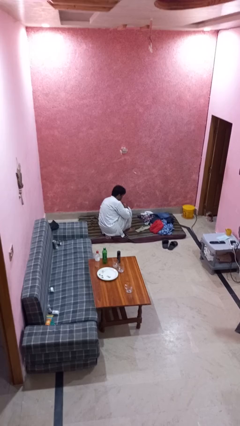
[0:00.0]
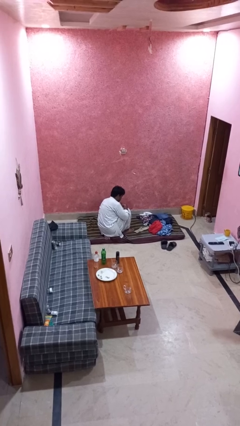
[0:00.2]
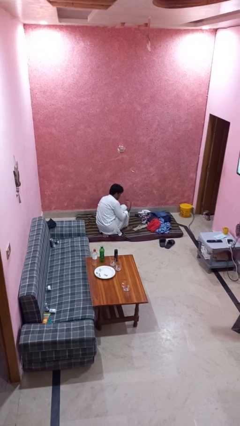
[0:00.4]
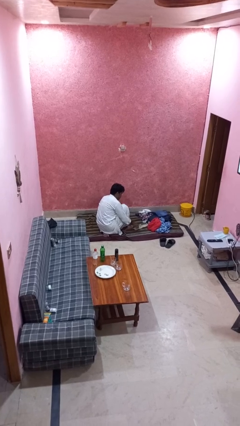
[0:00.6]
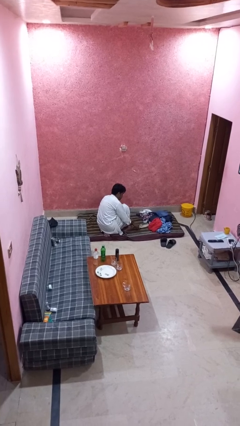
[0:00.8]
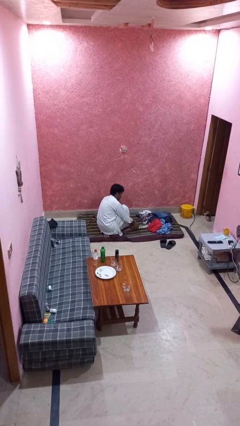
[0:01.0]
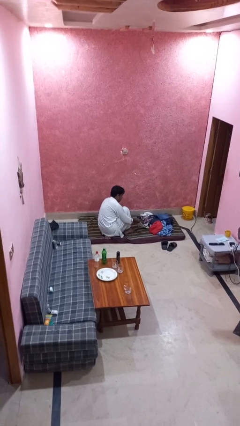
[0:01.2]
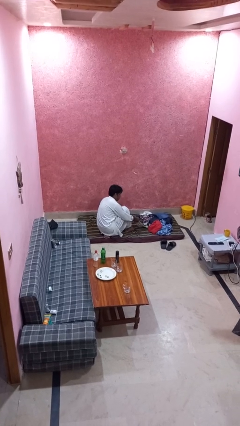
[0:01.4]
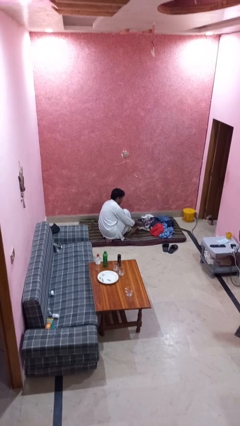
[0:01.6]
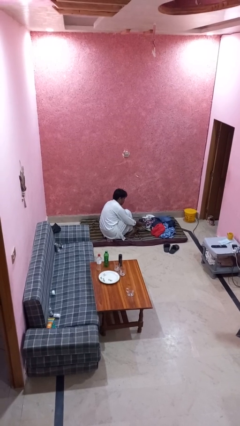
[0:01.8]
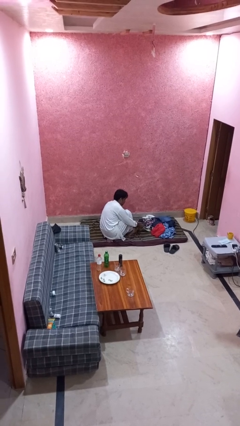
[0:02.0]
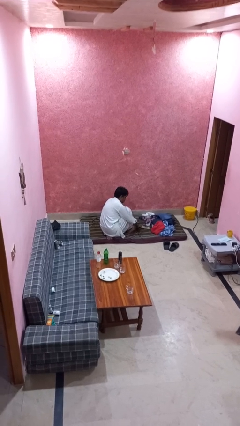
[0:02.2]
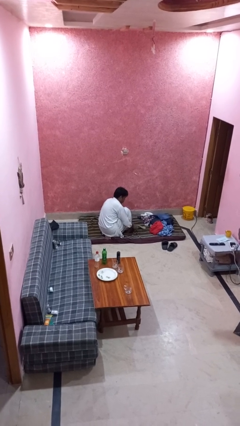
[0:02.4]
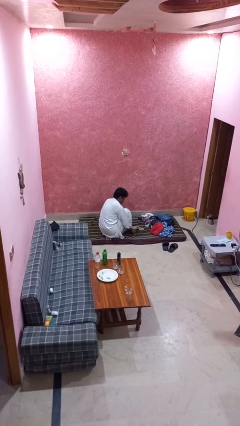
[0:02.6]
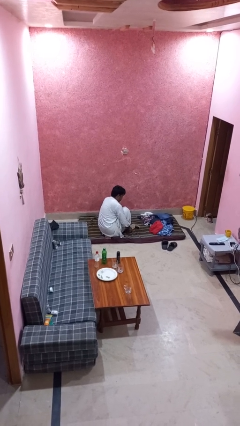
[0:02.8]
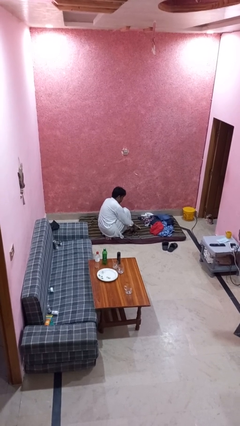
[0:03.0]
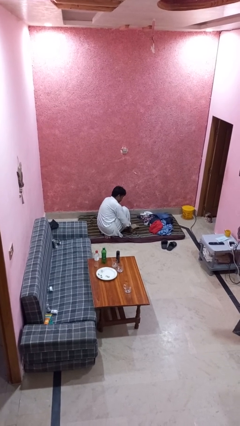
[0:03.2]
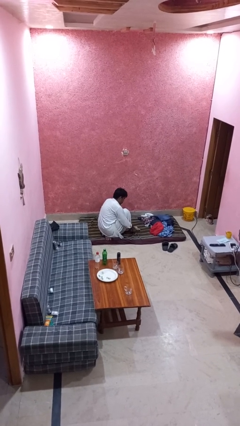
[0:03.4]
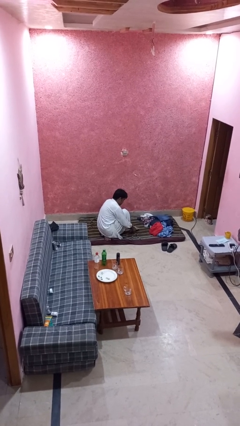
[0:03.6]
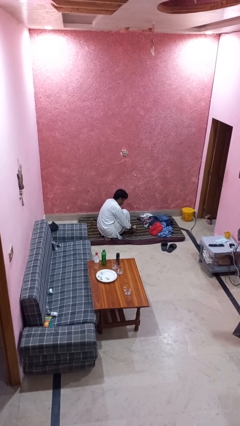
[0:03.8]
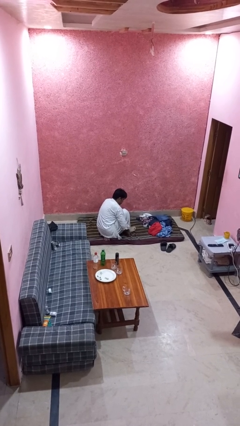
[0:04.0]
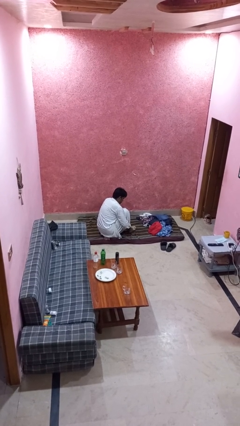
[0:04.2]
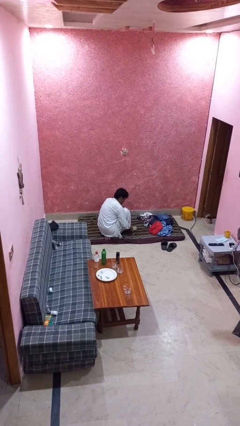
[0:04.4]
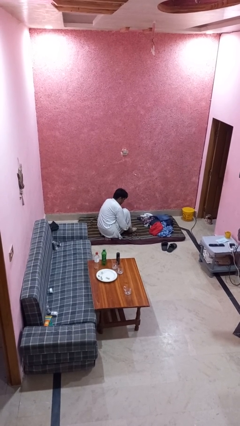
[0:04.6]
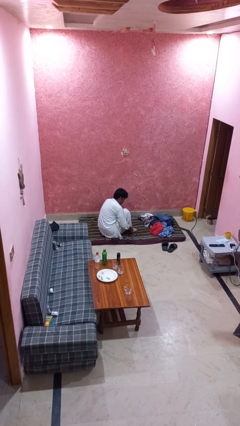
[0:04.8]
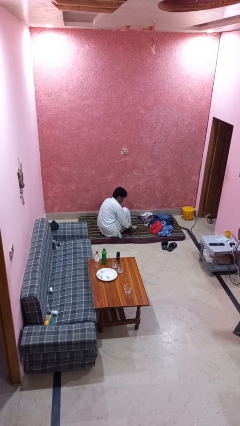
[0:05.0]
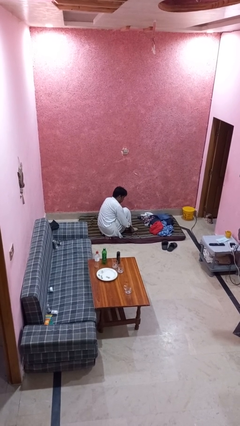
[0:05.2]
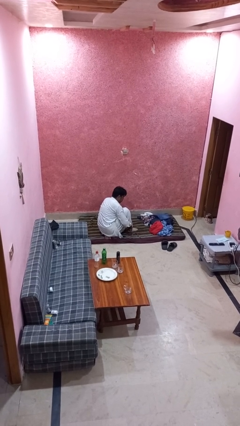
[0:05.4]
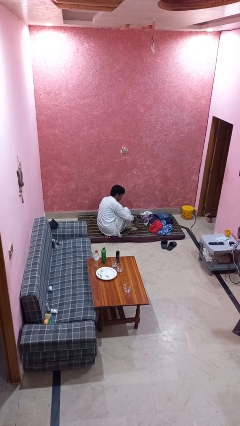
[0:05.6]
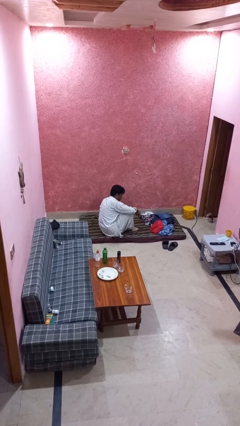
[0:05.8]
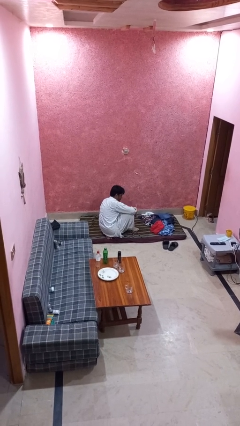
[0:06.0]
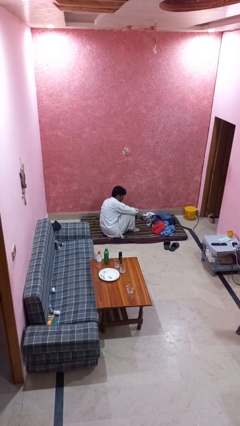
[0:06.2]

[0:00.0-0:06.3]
person puts on socks

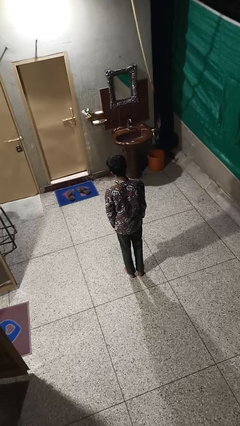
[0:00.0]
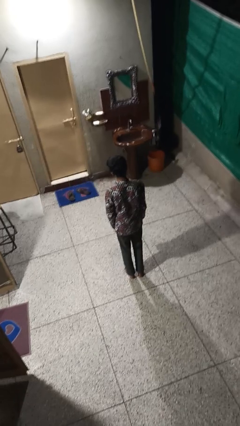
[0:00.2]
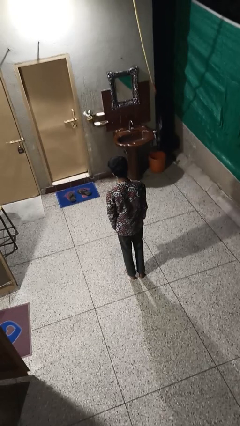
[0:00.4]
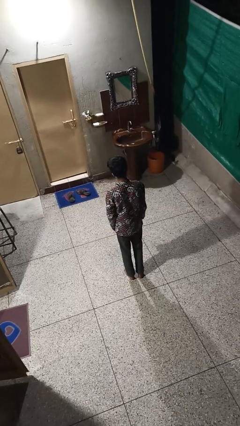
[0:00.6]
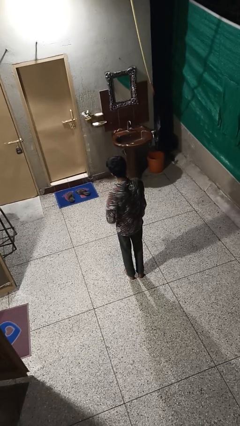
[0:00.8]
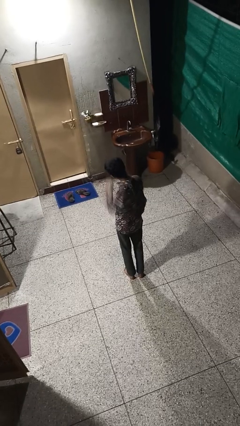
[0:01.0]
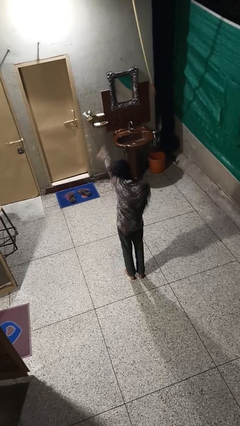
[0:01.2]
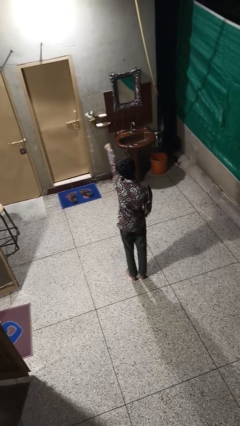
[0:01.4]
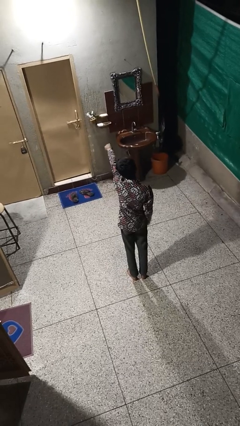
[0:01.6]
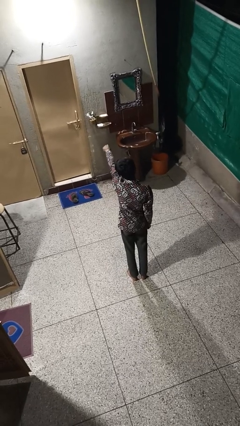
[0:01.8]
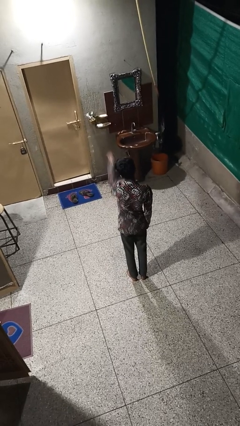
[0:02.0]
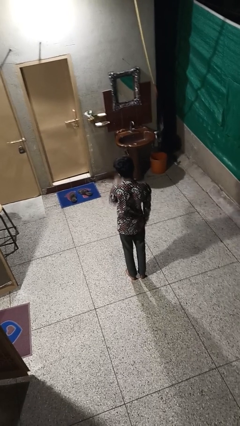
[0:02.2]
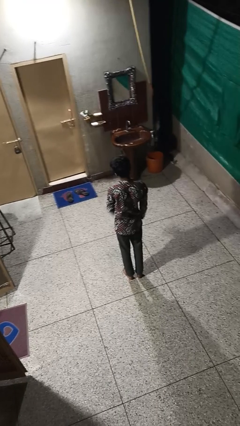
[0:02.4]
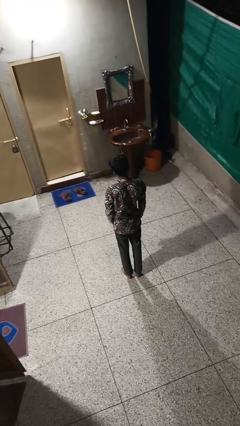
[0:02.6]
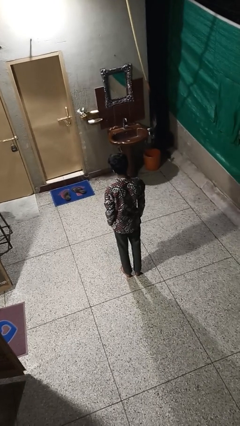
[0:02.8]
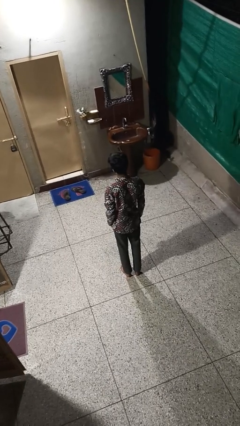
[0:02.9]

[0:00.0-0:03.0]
person punches

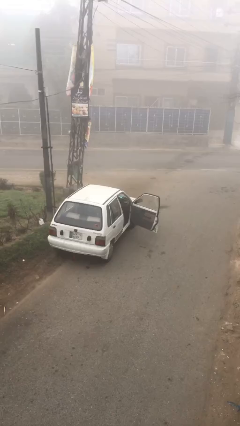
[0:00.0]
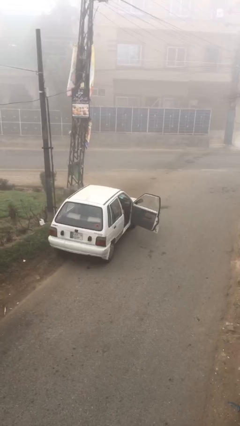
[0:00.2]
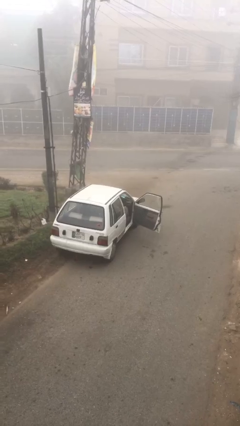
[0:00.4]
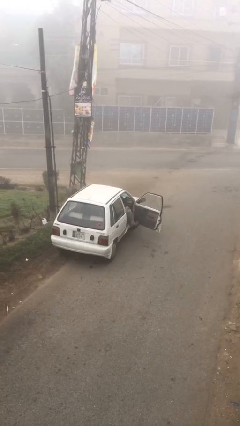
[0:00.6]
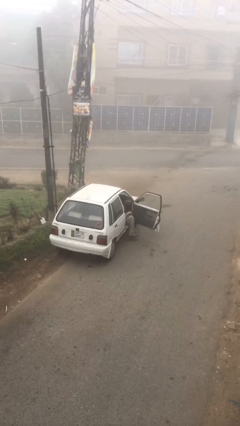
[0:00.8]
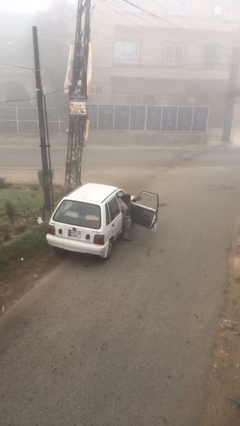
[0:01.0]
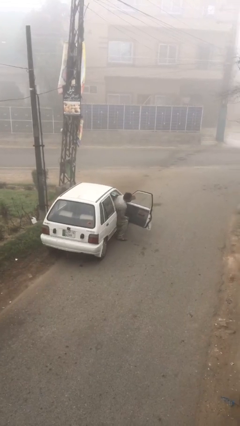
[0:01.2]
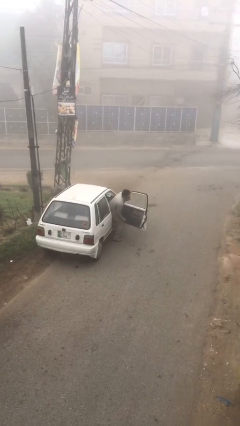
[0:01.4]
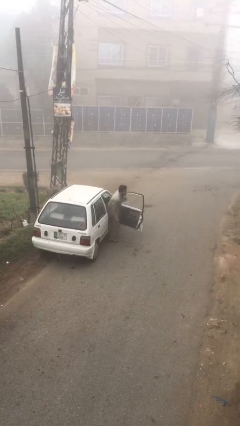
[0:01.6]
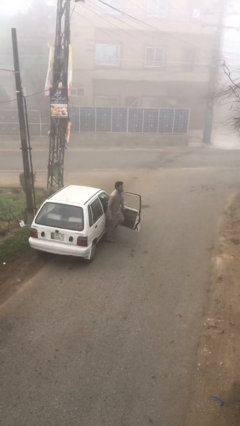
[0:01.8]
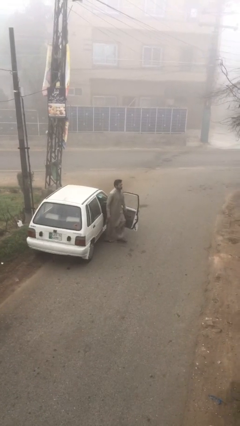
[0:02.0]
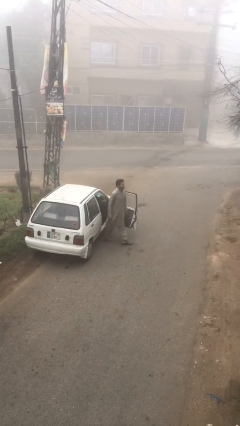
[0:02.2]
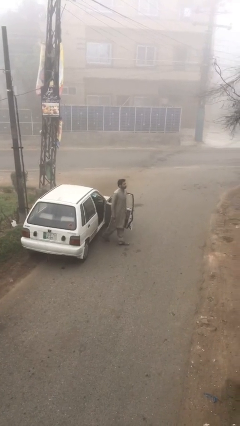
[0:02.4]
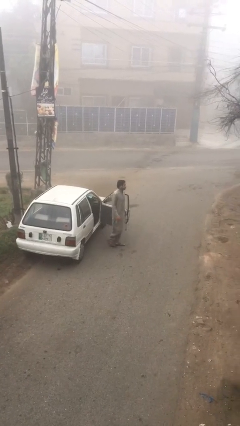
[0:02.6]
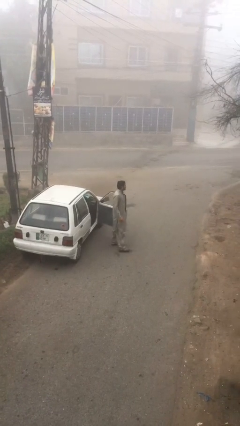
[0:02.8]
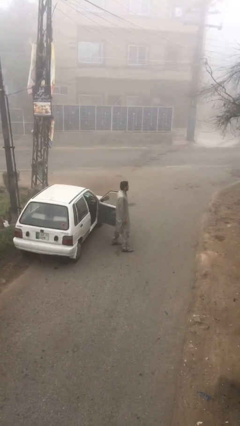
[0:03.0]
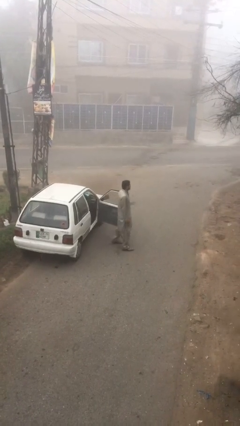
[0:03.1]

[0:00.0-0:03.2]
person exits car

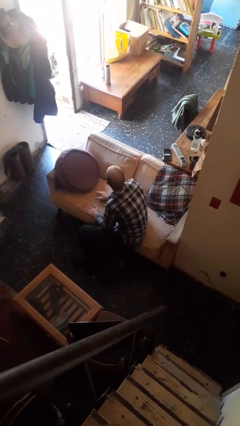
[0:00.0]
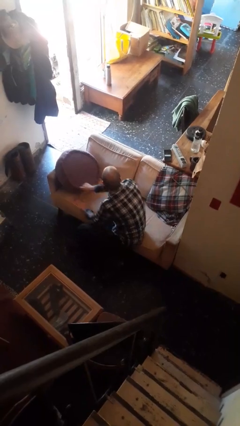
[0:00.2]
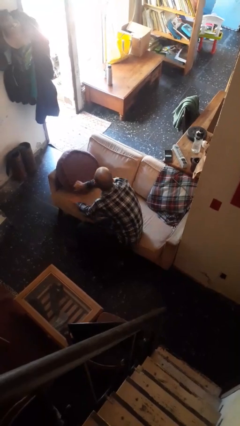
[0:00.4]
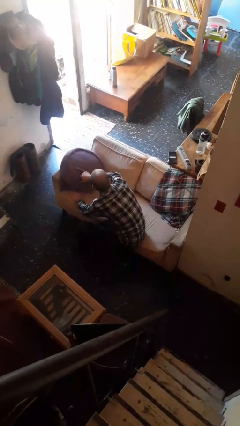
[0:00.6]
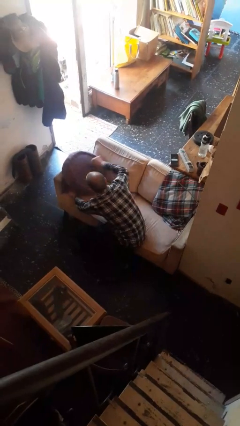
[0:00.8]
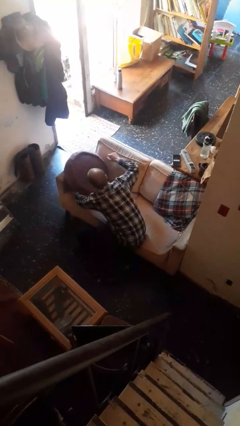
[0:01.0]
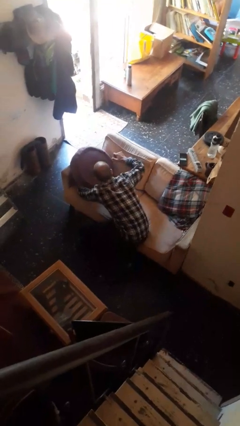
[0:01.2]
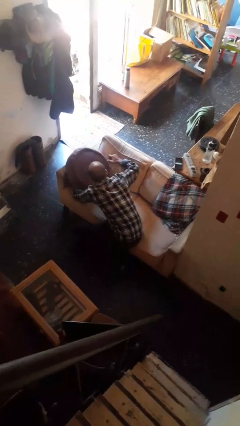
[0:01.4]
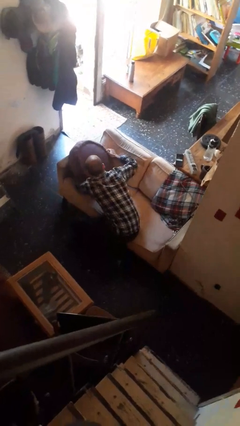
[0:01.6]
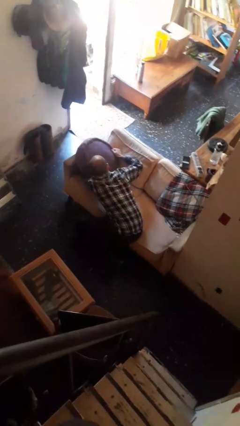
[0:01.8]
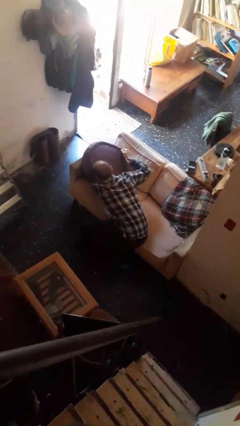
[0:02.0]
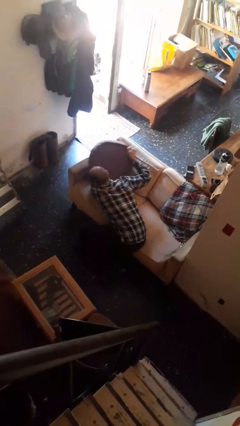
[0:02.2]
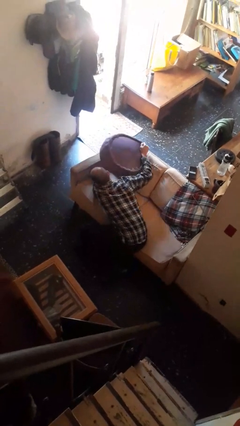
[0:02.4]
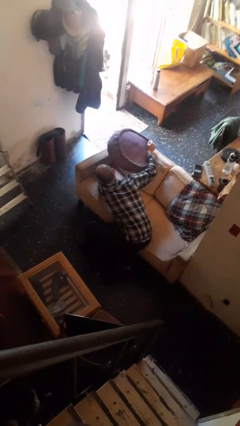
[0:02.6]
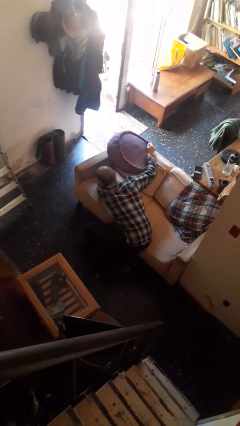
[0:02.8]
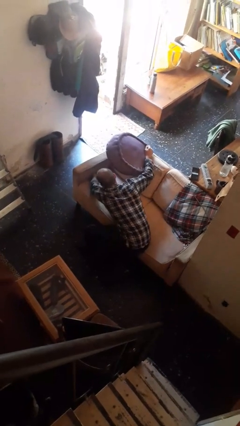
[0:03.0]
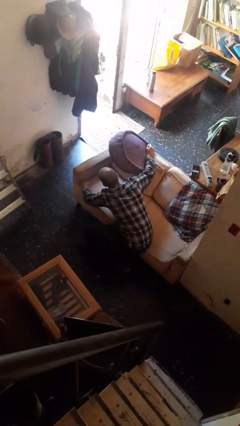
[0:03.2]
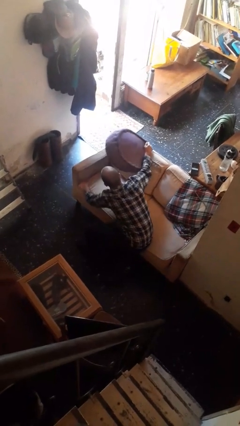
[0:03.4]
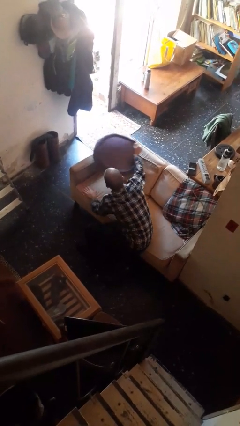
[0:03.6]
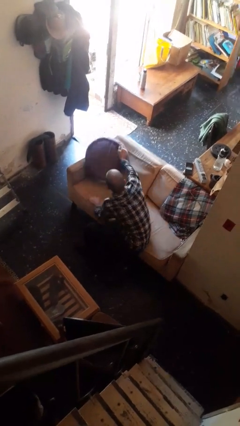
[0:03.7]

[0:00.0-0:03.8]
person searches in couch

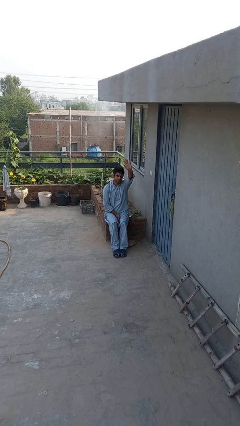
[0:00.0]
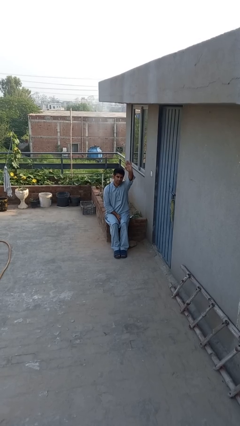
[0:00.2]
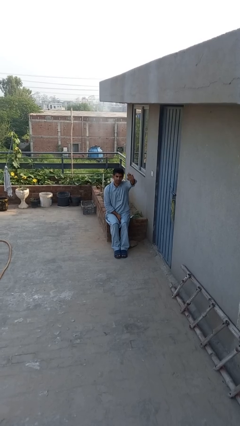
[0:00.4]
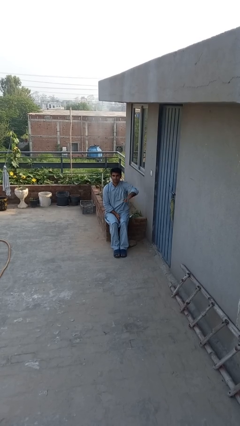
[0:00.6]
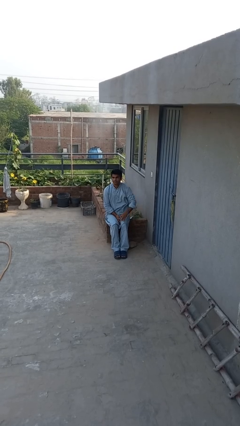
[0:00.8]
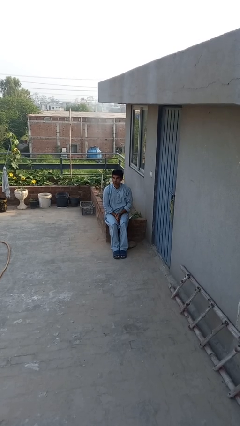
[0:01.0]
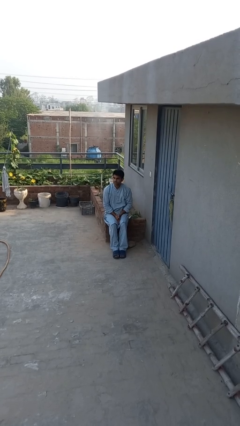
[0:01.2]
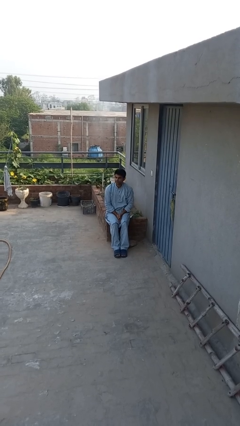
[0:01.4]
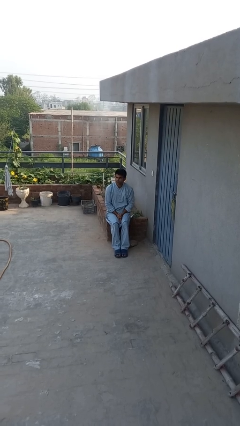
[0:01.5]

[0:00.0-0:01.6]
person gestures lower hand
